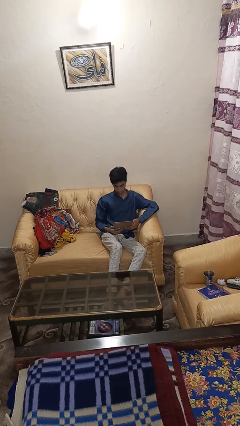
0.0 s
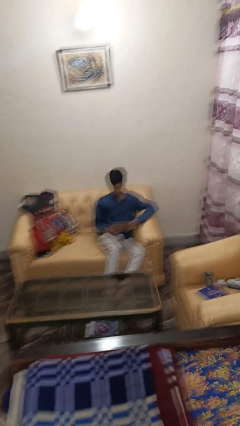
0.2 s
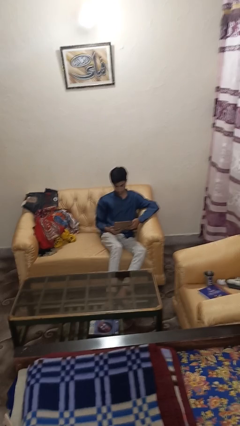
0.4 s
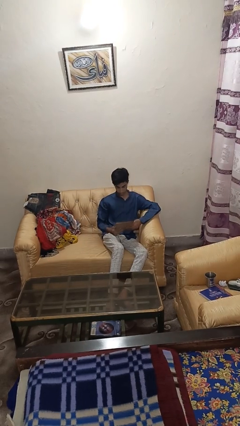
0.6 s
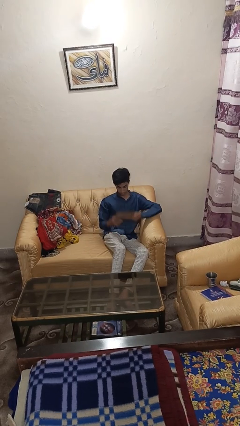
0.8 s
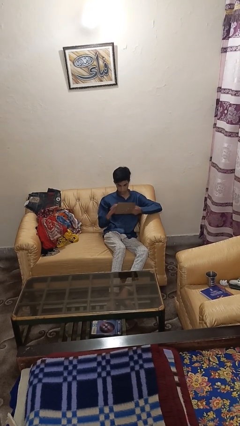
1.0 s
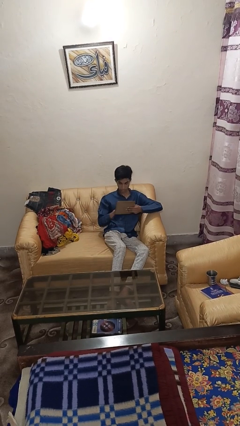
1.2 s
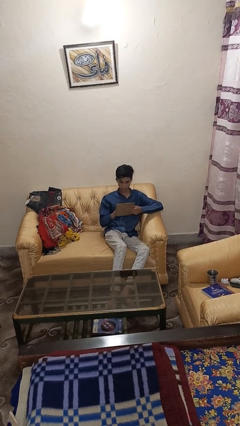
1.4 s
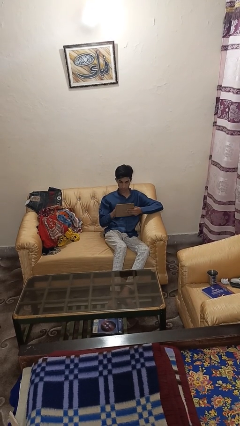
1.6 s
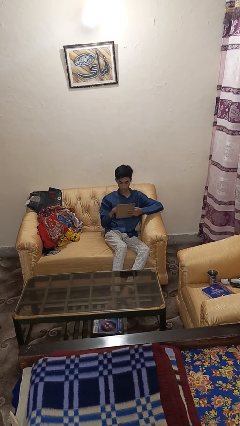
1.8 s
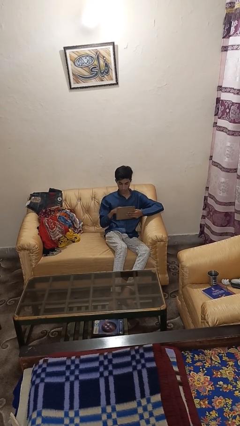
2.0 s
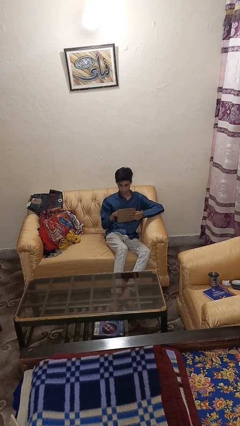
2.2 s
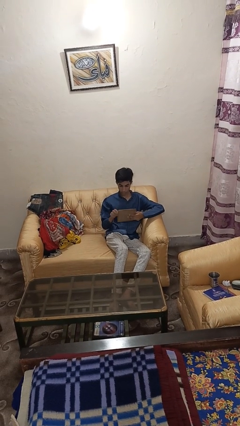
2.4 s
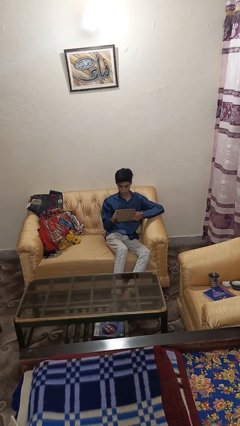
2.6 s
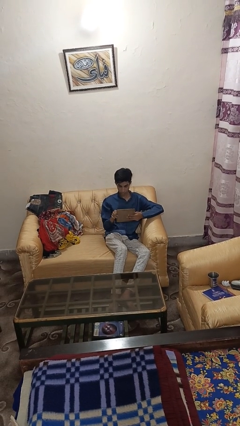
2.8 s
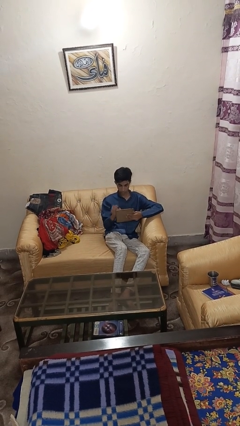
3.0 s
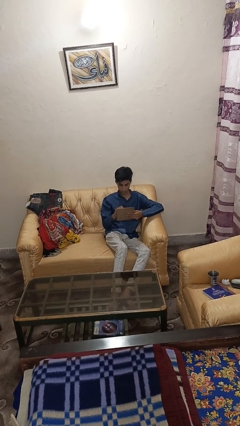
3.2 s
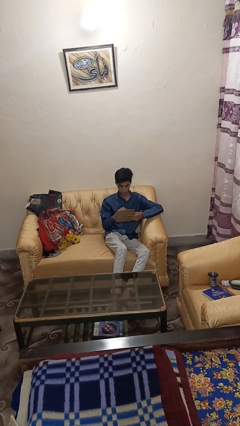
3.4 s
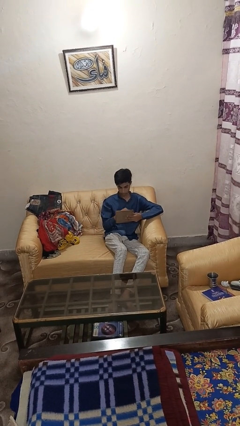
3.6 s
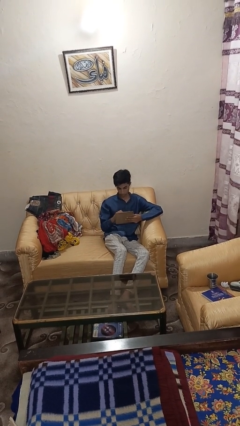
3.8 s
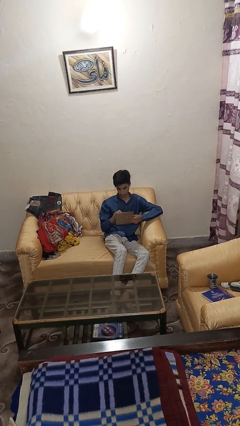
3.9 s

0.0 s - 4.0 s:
person interacts with tablet

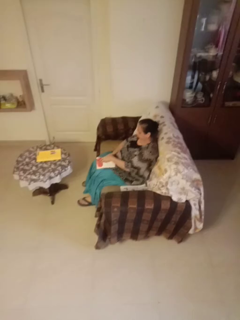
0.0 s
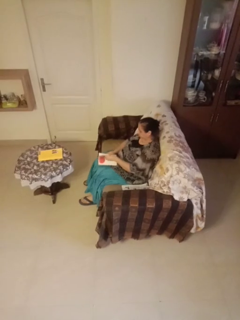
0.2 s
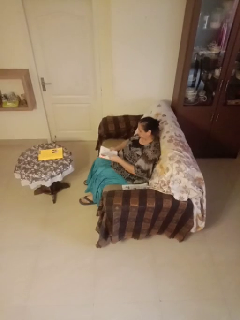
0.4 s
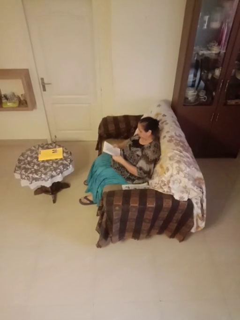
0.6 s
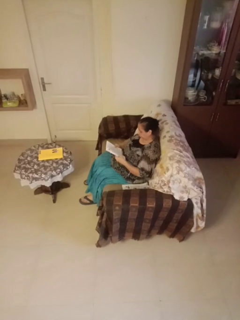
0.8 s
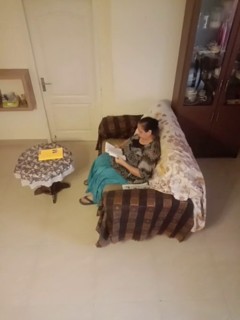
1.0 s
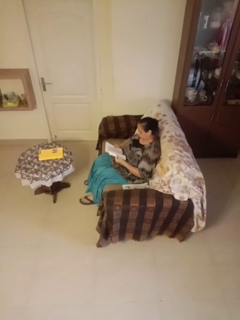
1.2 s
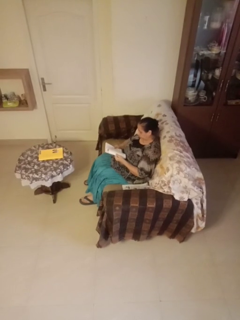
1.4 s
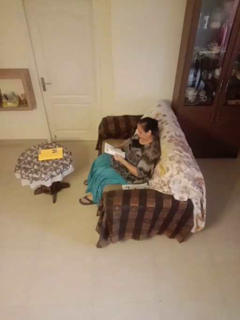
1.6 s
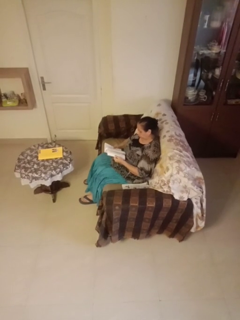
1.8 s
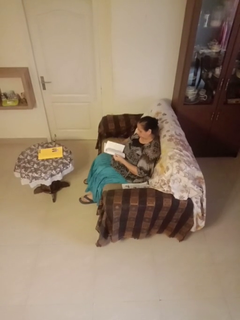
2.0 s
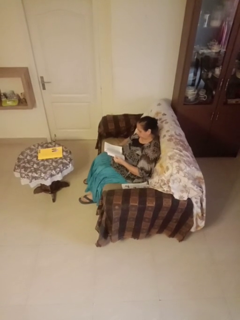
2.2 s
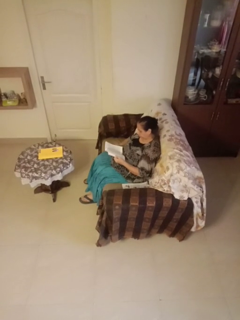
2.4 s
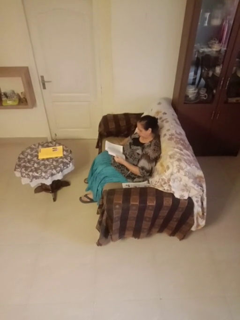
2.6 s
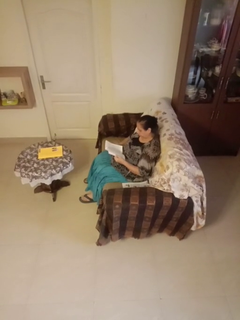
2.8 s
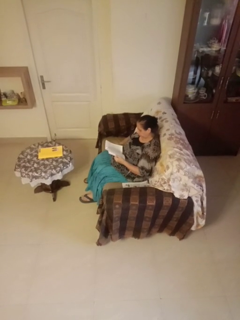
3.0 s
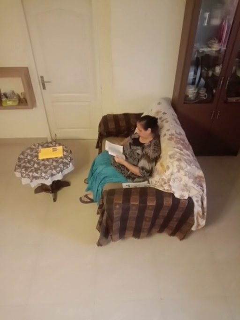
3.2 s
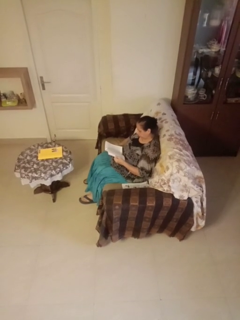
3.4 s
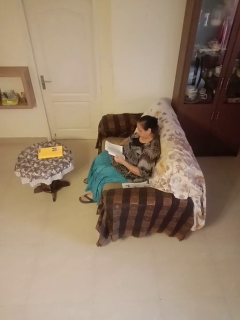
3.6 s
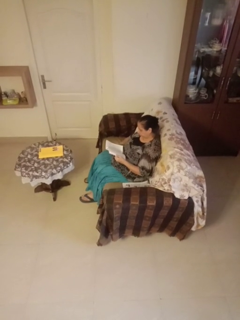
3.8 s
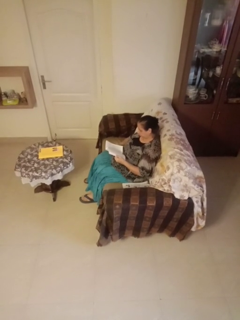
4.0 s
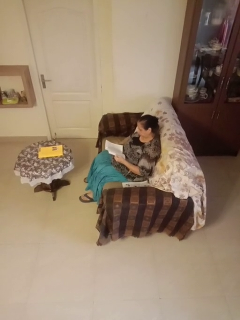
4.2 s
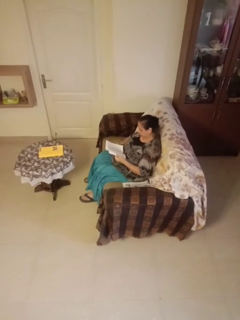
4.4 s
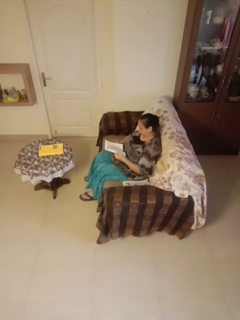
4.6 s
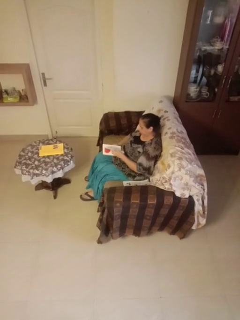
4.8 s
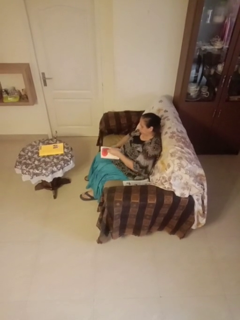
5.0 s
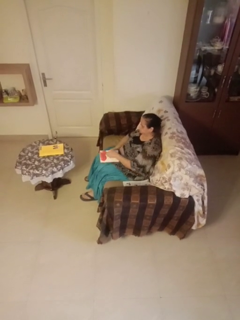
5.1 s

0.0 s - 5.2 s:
person reads book

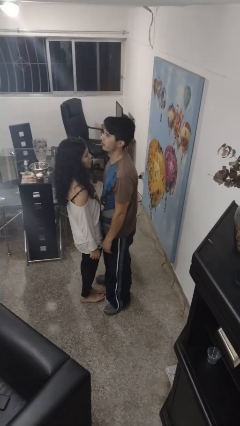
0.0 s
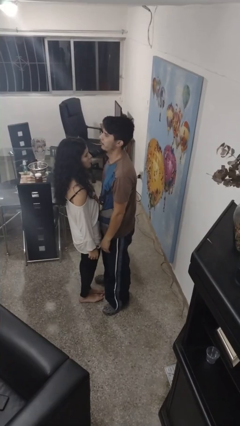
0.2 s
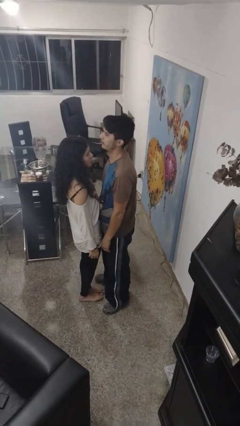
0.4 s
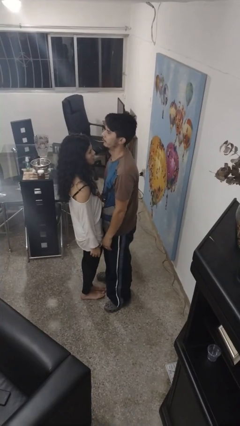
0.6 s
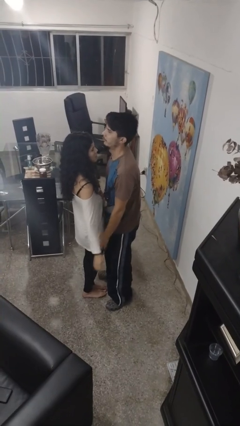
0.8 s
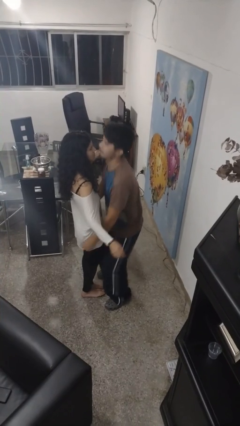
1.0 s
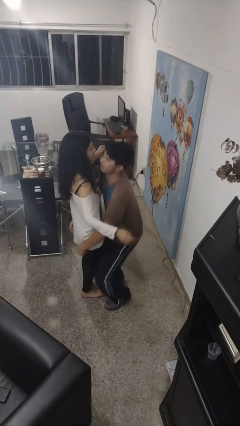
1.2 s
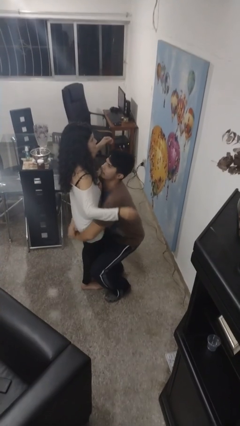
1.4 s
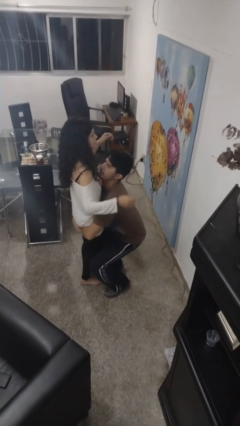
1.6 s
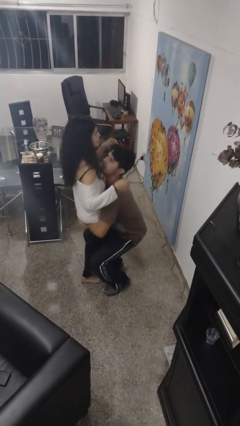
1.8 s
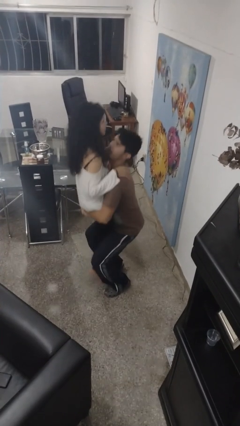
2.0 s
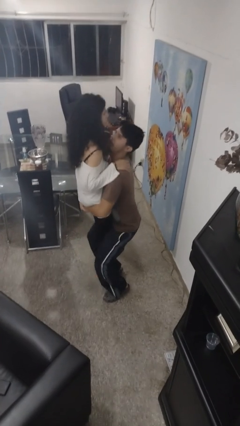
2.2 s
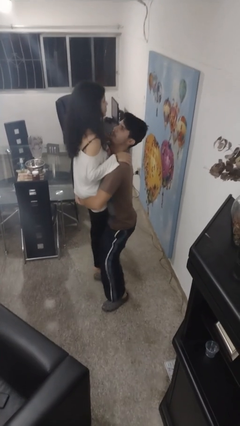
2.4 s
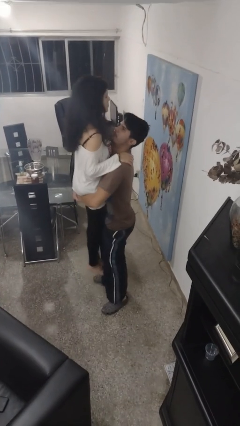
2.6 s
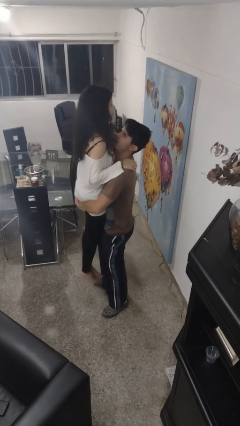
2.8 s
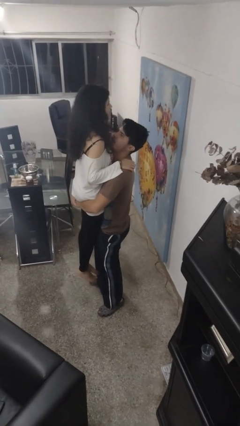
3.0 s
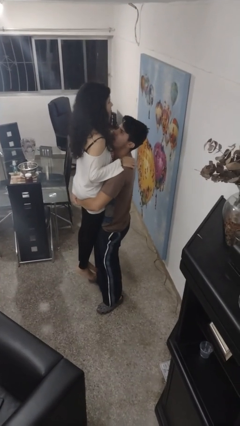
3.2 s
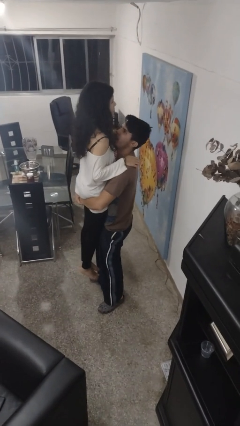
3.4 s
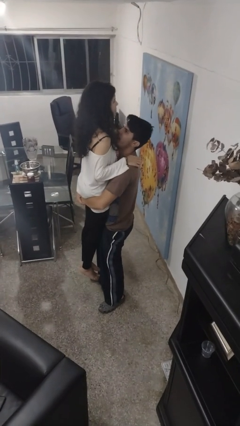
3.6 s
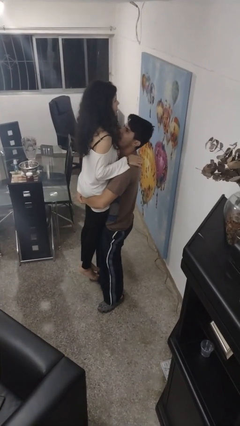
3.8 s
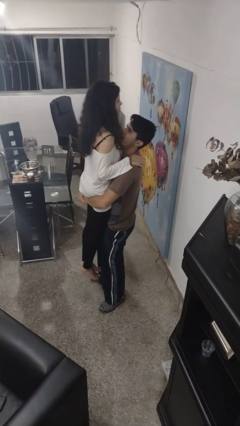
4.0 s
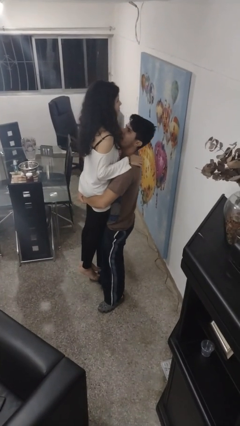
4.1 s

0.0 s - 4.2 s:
person picks up person

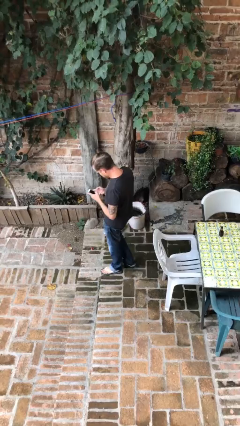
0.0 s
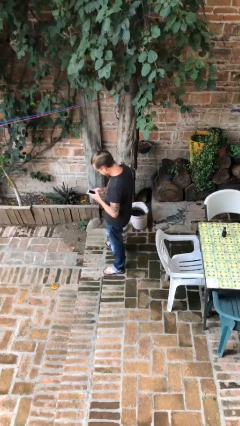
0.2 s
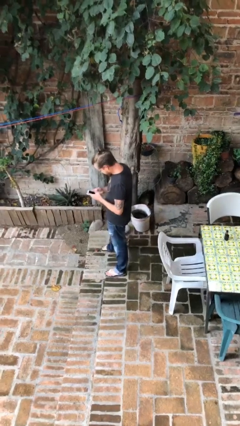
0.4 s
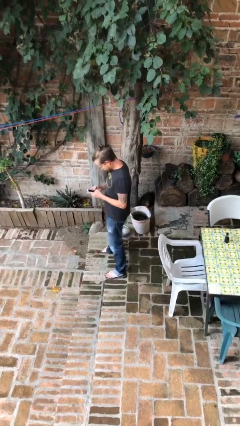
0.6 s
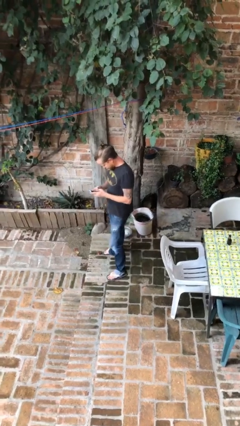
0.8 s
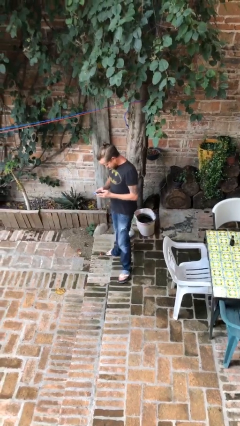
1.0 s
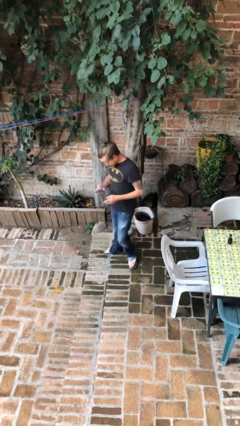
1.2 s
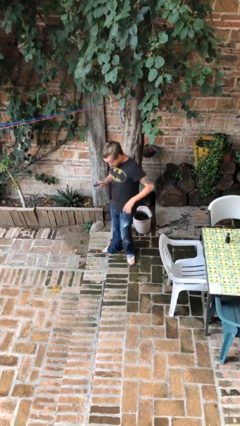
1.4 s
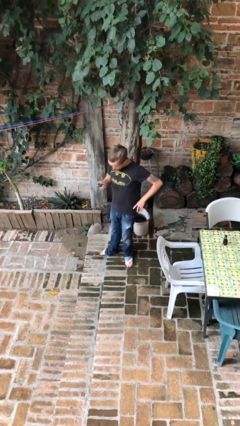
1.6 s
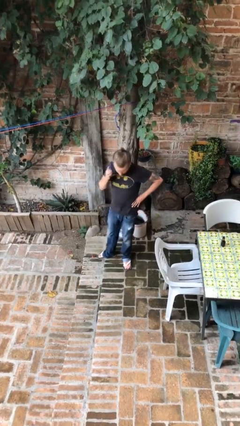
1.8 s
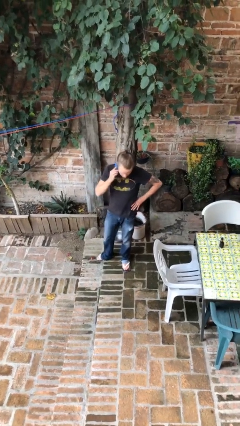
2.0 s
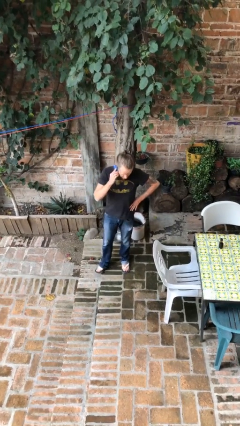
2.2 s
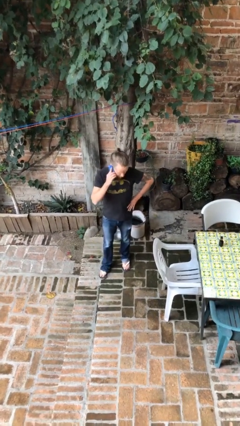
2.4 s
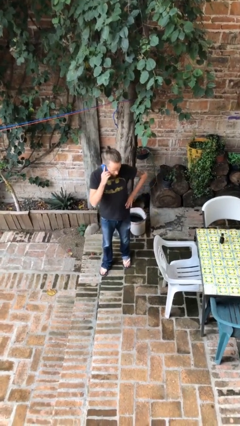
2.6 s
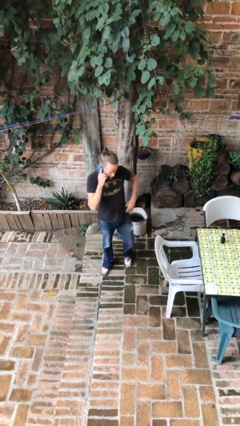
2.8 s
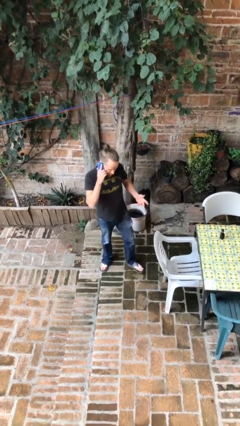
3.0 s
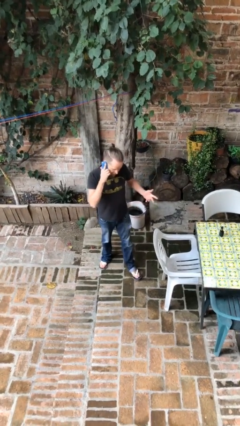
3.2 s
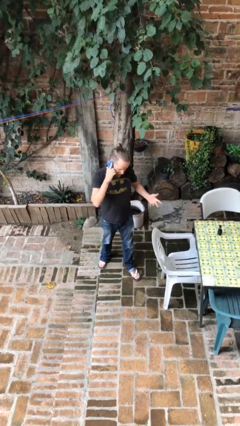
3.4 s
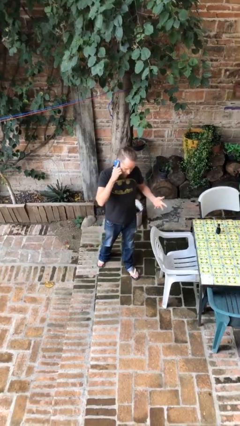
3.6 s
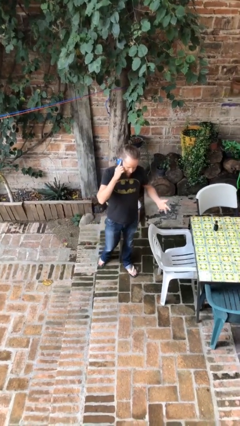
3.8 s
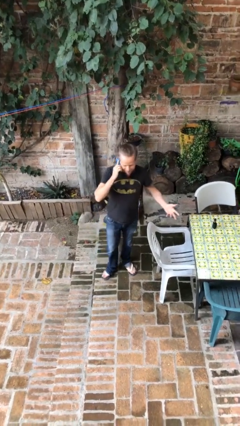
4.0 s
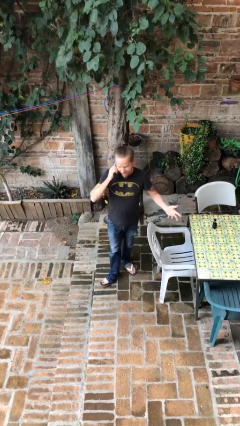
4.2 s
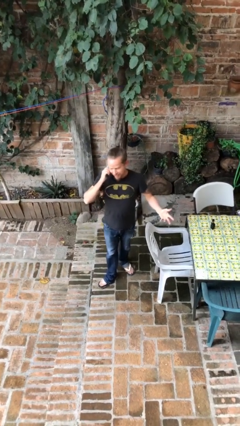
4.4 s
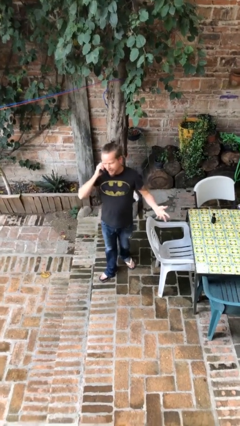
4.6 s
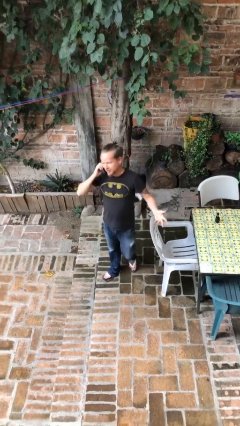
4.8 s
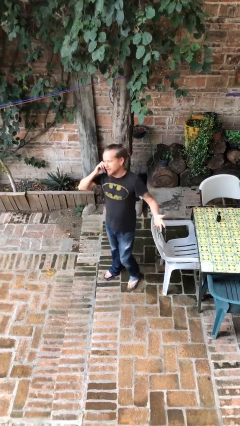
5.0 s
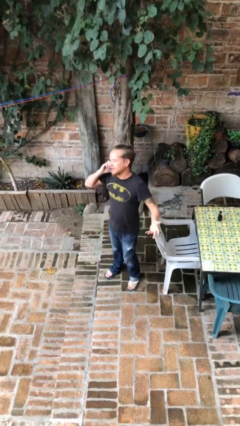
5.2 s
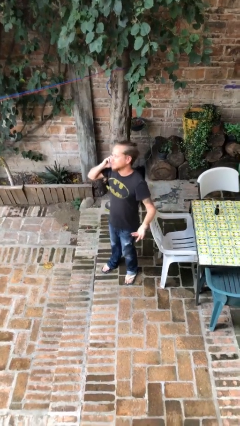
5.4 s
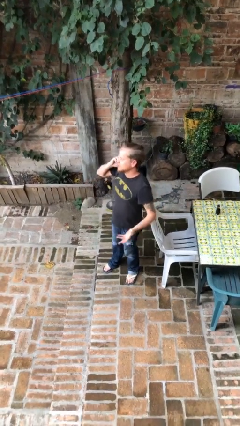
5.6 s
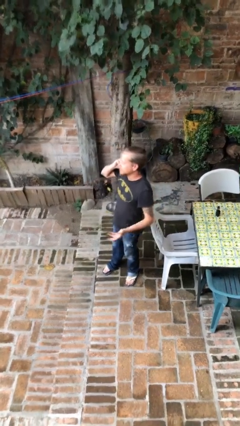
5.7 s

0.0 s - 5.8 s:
person talks on phone
